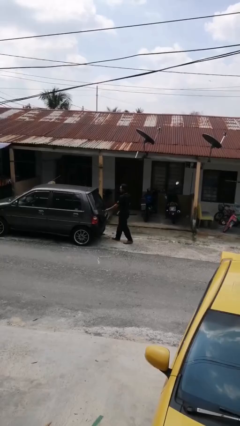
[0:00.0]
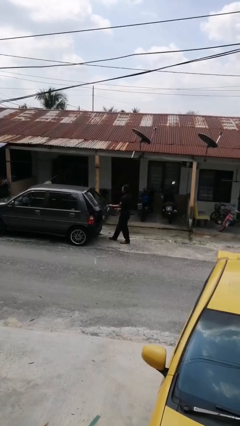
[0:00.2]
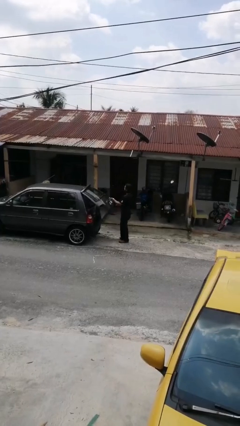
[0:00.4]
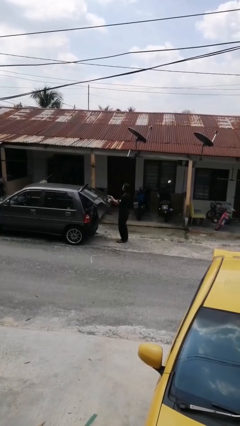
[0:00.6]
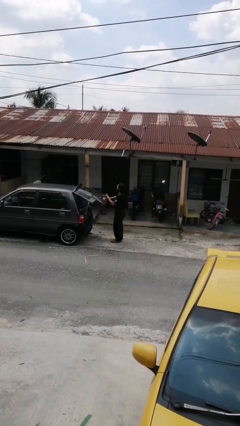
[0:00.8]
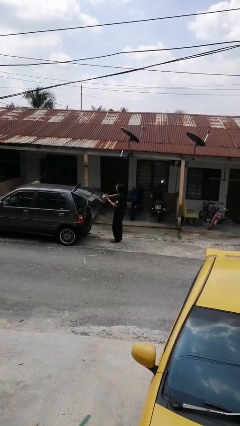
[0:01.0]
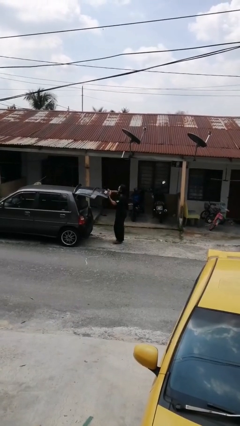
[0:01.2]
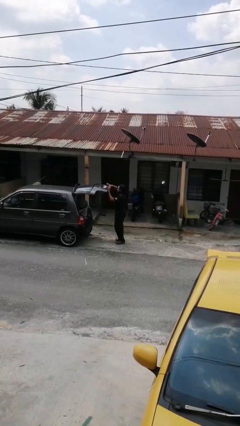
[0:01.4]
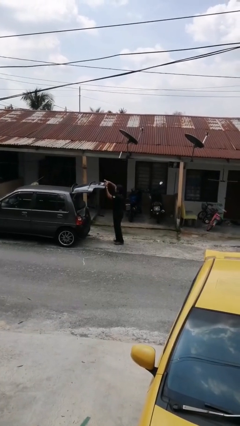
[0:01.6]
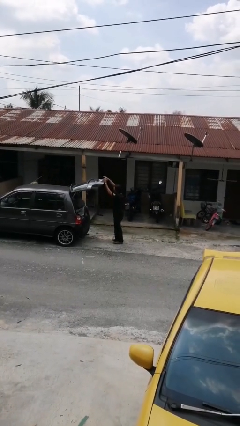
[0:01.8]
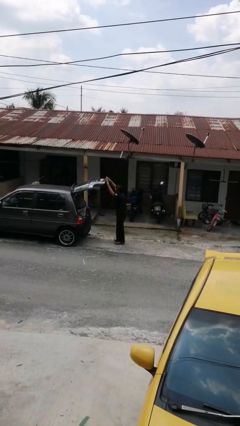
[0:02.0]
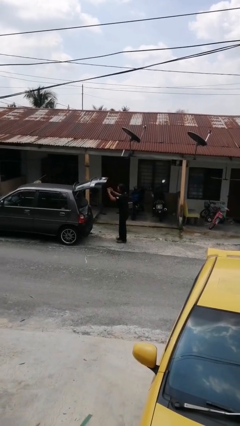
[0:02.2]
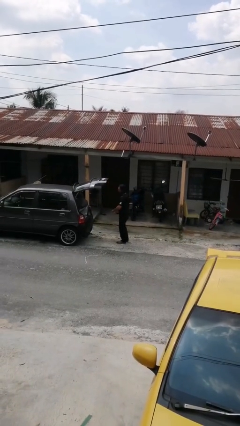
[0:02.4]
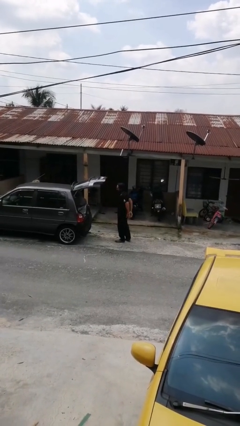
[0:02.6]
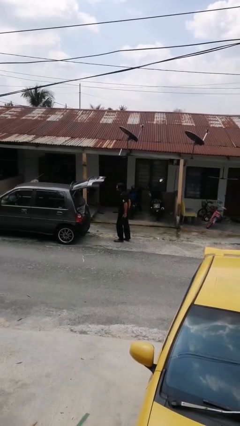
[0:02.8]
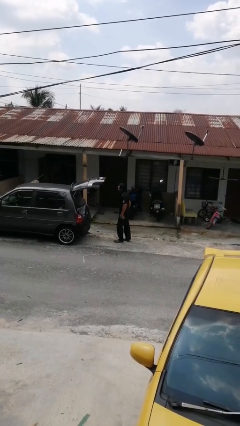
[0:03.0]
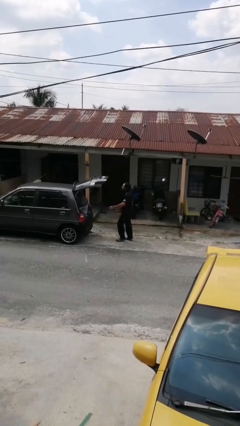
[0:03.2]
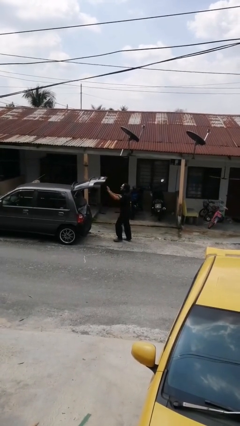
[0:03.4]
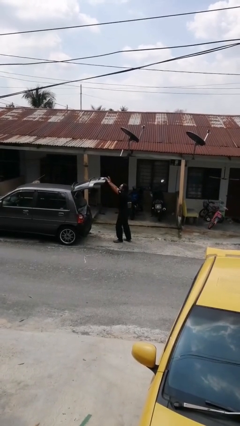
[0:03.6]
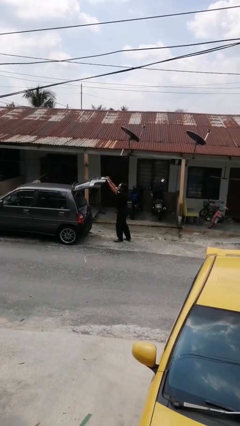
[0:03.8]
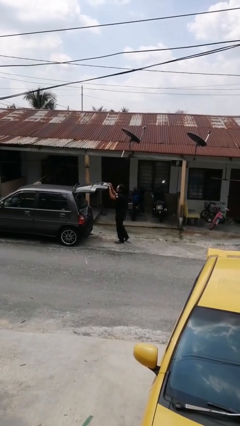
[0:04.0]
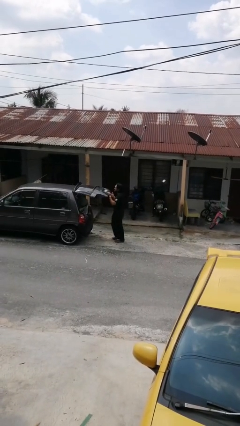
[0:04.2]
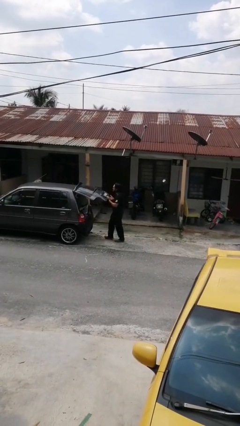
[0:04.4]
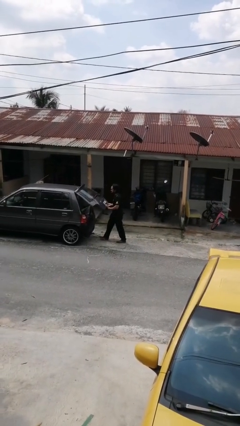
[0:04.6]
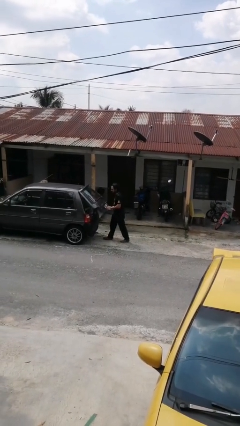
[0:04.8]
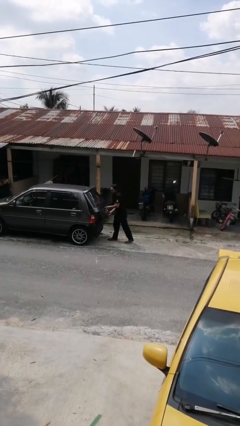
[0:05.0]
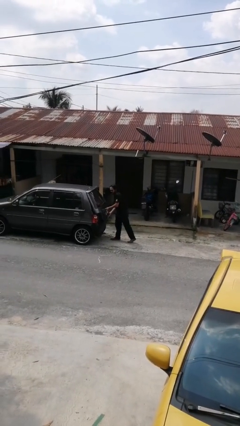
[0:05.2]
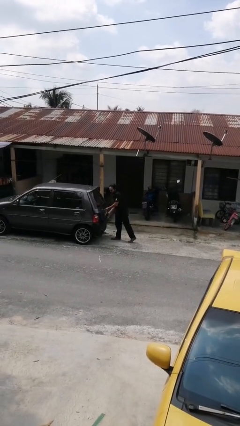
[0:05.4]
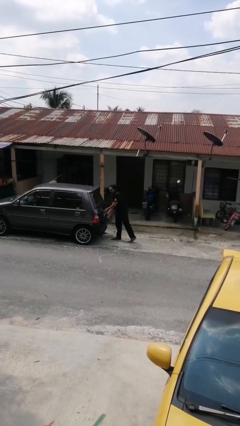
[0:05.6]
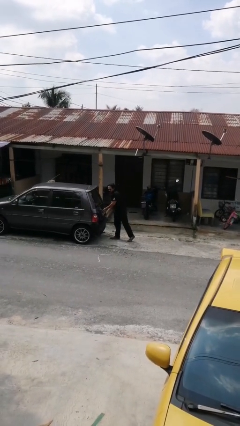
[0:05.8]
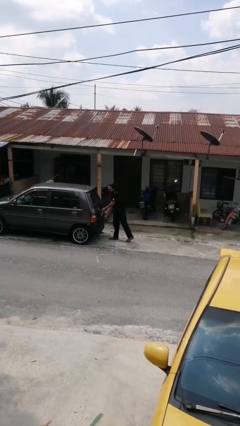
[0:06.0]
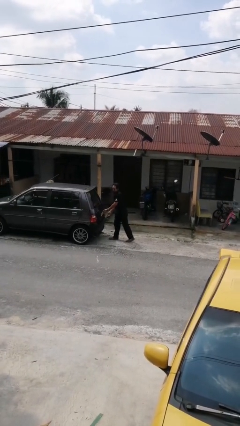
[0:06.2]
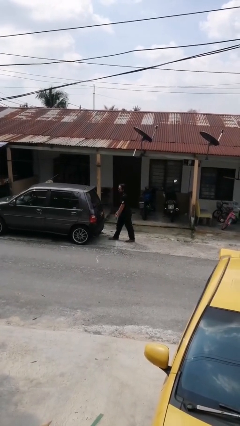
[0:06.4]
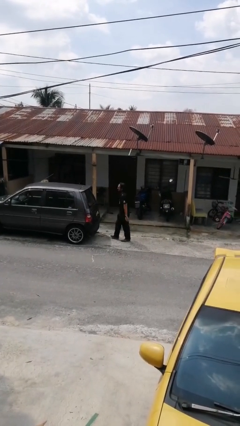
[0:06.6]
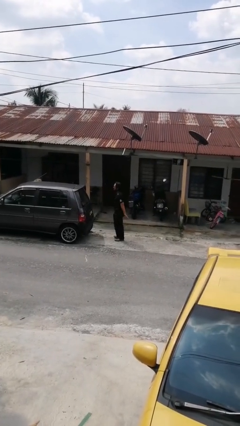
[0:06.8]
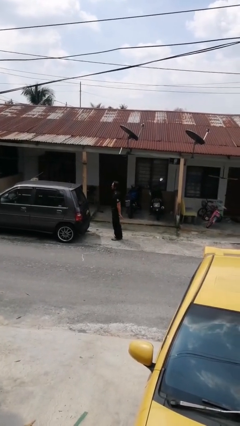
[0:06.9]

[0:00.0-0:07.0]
person opens car trunk

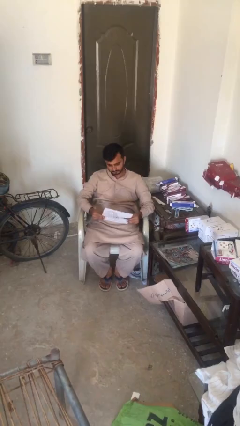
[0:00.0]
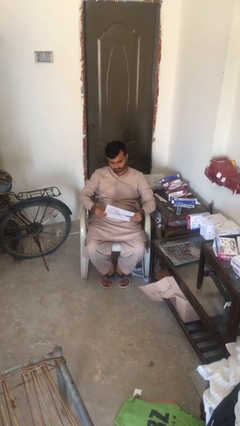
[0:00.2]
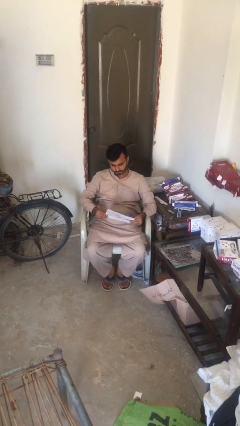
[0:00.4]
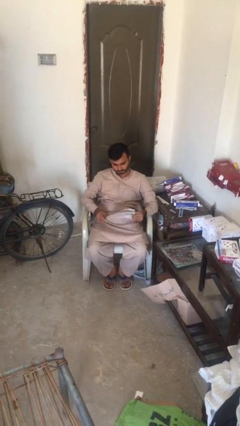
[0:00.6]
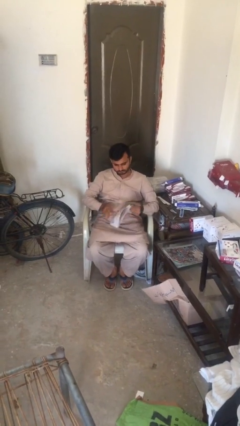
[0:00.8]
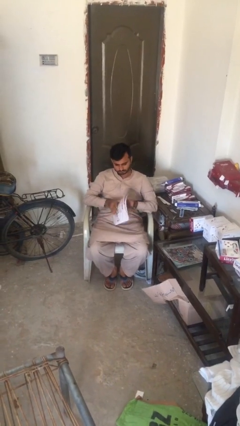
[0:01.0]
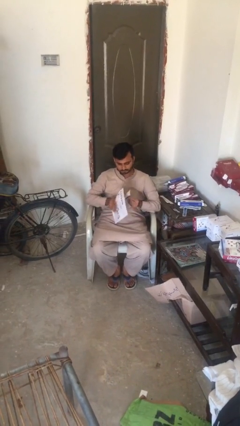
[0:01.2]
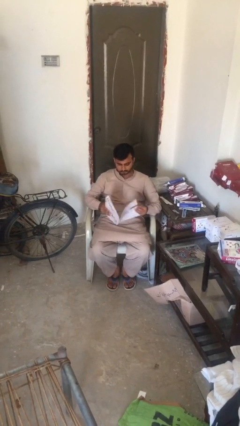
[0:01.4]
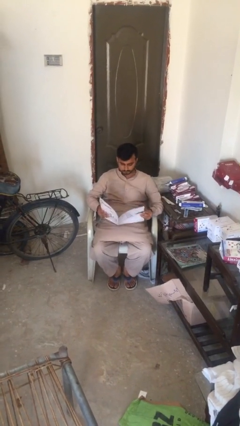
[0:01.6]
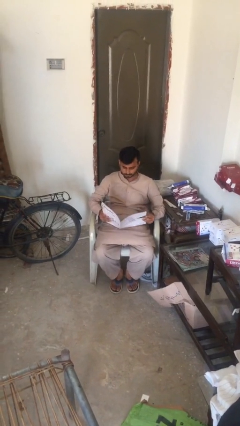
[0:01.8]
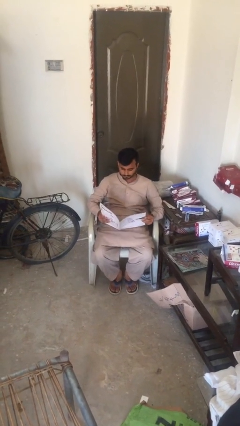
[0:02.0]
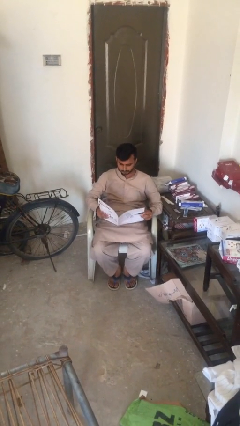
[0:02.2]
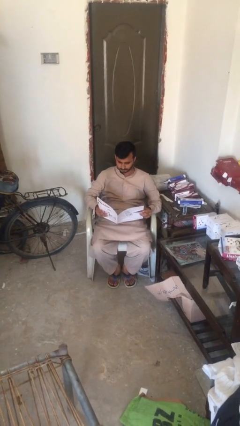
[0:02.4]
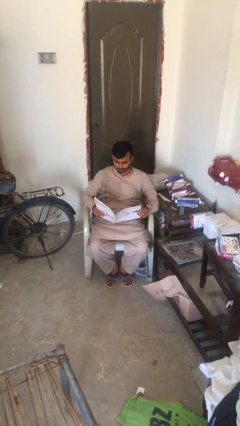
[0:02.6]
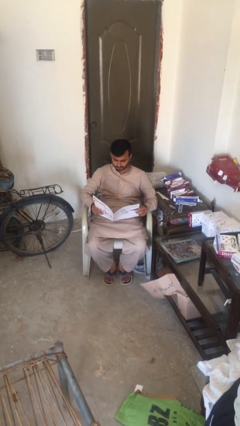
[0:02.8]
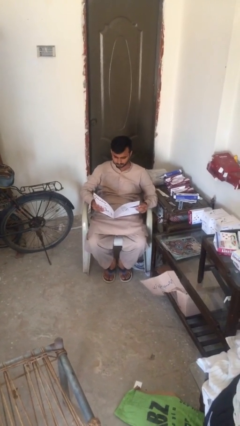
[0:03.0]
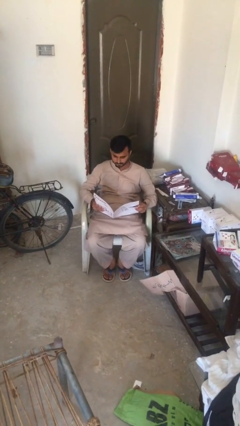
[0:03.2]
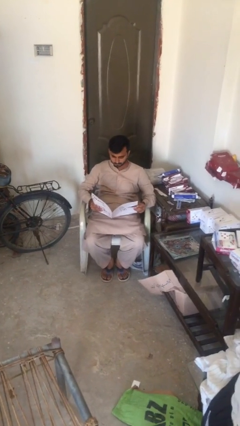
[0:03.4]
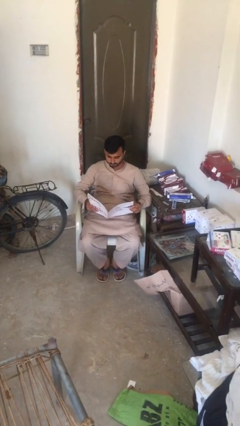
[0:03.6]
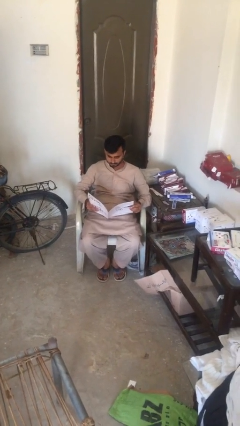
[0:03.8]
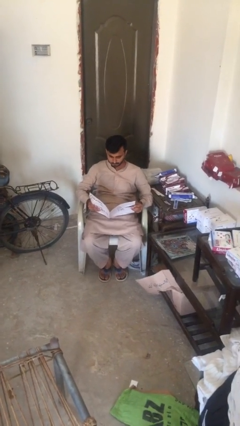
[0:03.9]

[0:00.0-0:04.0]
person reads document

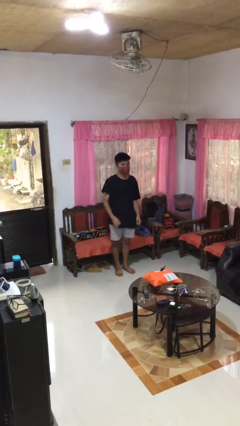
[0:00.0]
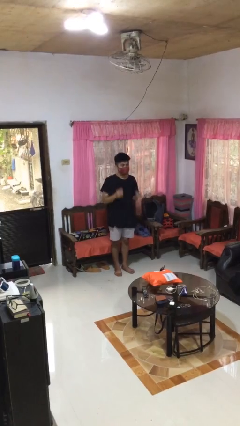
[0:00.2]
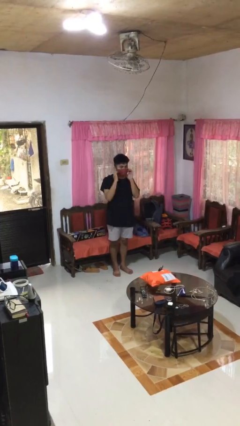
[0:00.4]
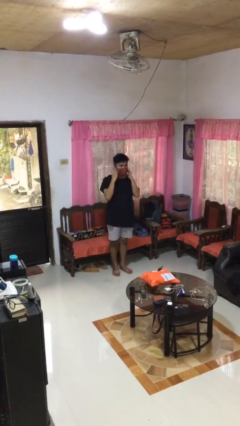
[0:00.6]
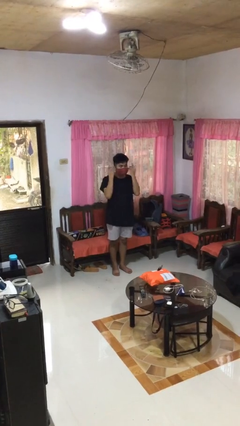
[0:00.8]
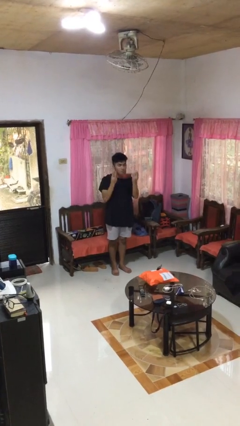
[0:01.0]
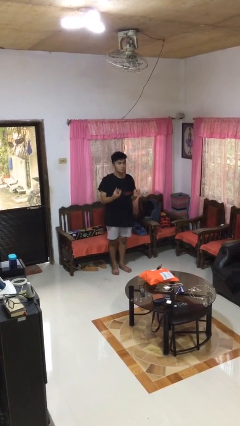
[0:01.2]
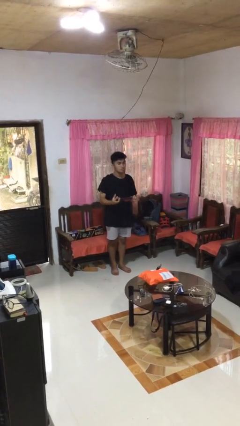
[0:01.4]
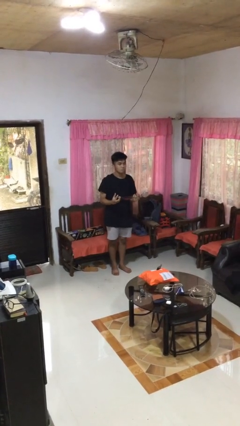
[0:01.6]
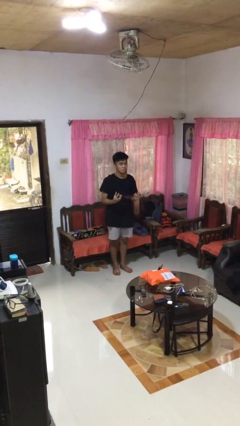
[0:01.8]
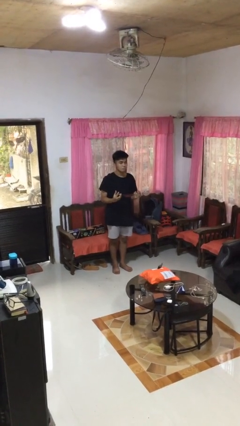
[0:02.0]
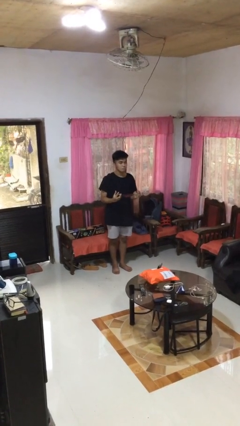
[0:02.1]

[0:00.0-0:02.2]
person takes off facemask

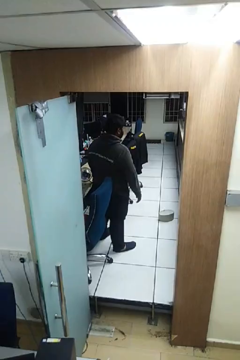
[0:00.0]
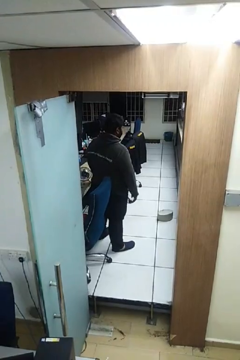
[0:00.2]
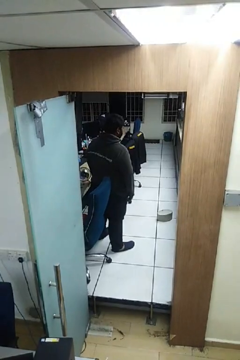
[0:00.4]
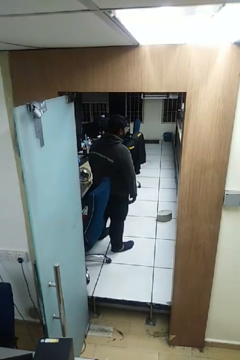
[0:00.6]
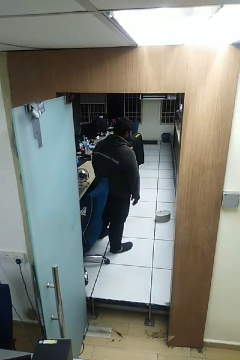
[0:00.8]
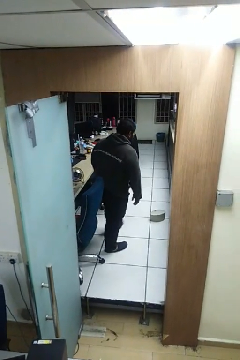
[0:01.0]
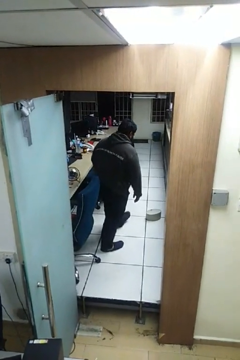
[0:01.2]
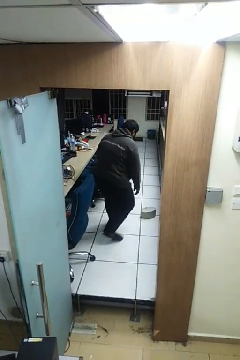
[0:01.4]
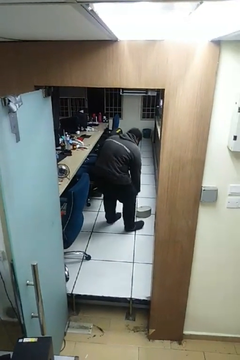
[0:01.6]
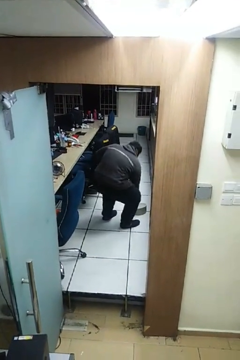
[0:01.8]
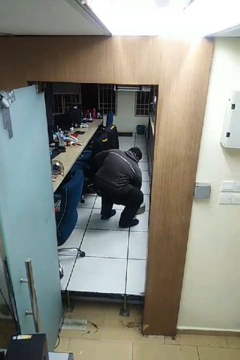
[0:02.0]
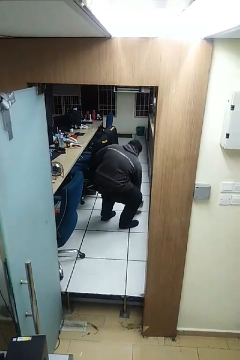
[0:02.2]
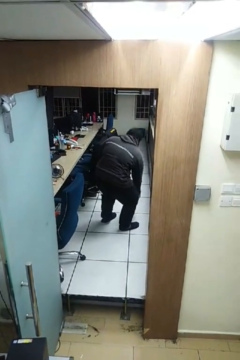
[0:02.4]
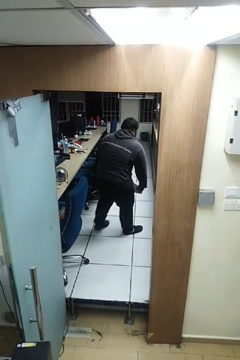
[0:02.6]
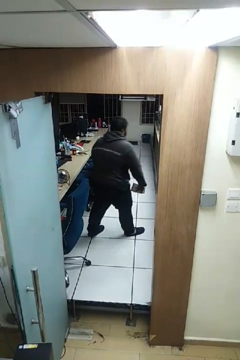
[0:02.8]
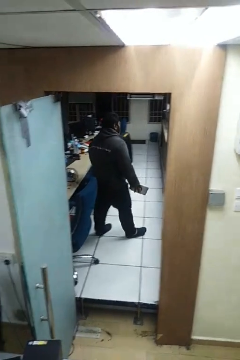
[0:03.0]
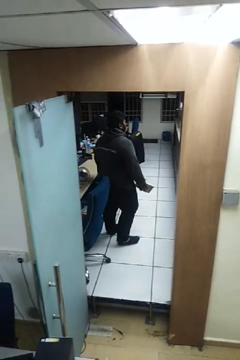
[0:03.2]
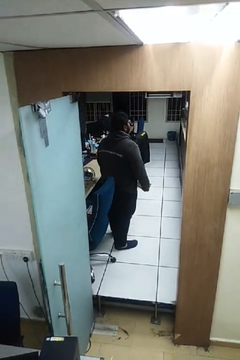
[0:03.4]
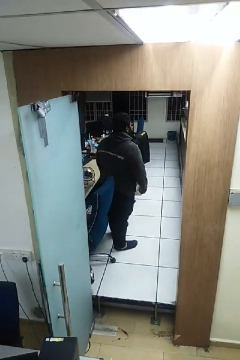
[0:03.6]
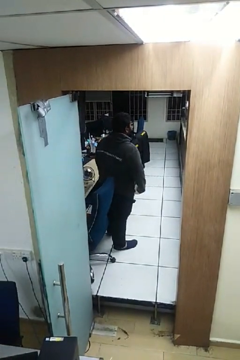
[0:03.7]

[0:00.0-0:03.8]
person picks up object from floor

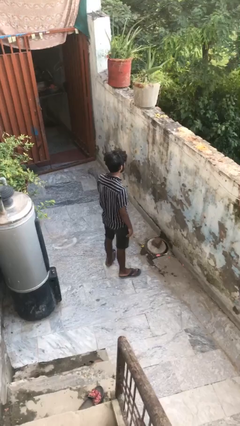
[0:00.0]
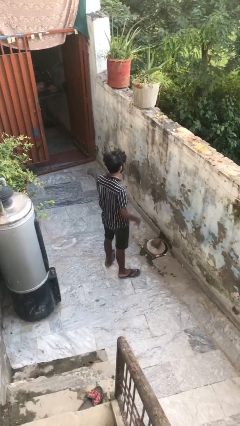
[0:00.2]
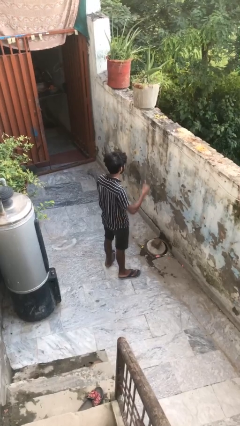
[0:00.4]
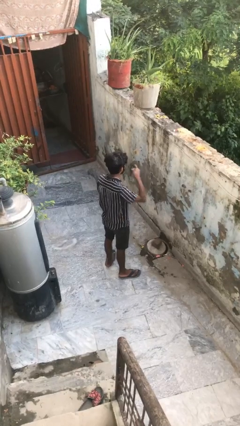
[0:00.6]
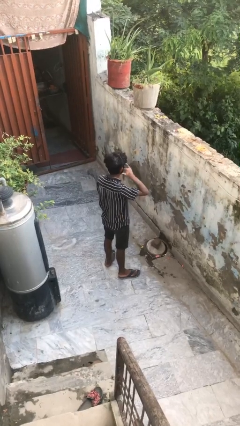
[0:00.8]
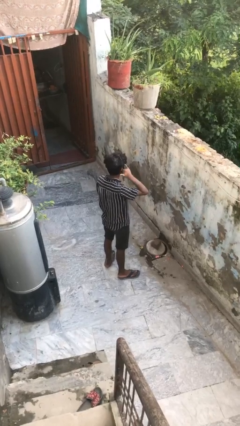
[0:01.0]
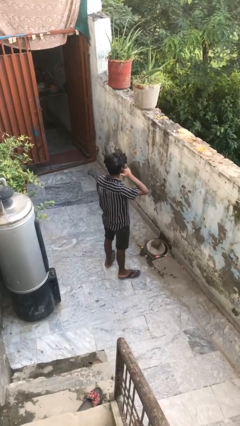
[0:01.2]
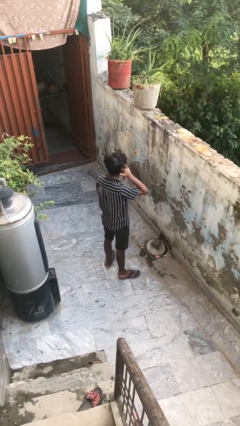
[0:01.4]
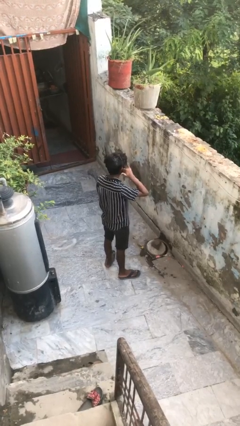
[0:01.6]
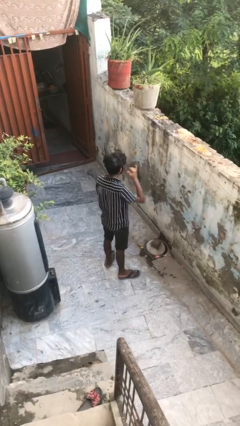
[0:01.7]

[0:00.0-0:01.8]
person gestures call me

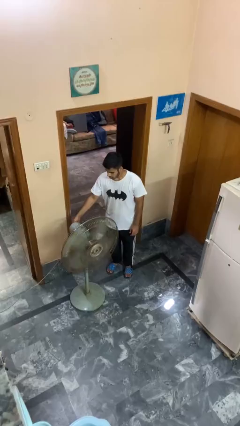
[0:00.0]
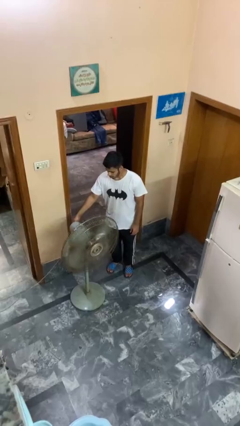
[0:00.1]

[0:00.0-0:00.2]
person turns off fan
